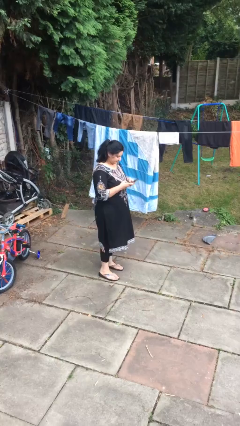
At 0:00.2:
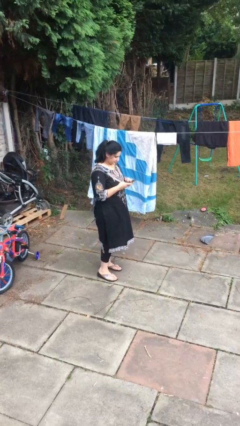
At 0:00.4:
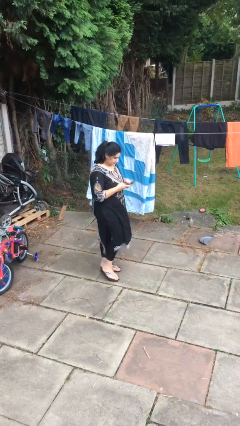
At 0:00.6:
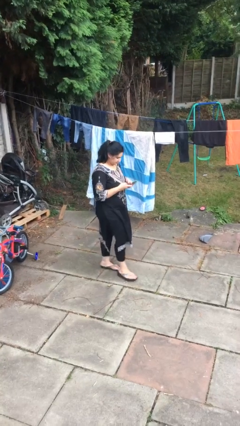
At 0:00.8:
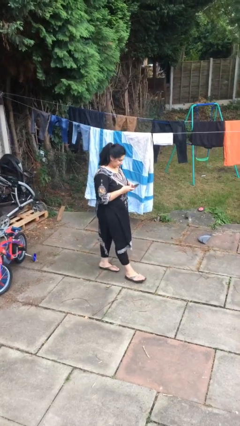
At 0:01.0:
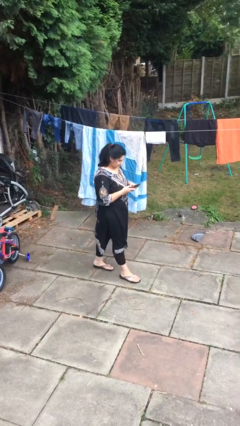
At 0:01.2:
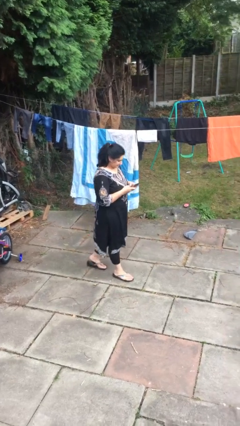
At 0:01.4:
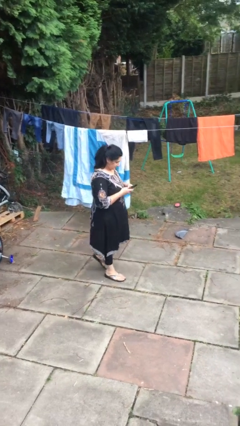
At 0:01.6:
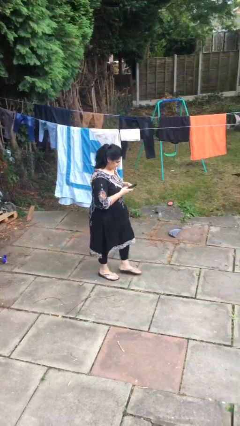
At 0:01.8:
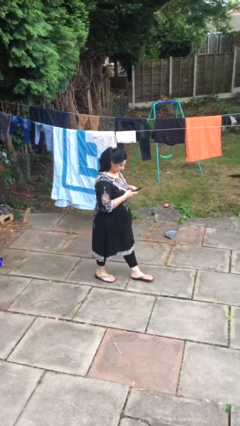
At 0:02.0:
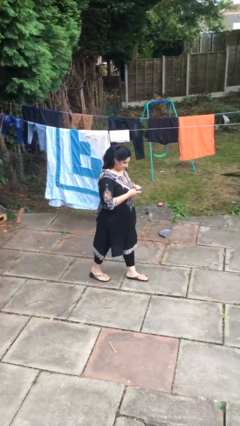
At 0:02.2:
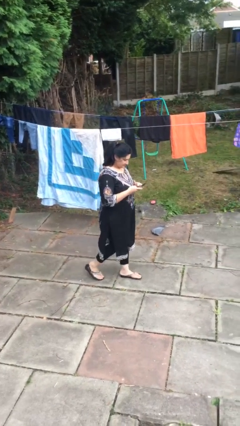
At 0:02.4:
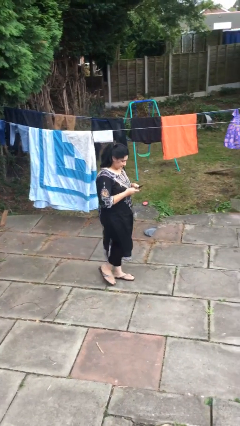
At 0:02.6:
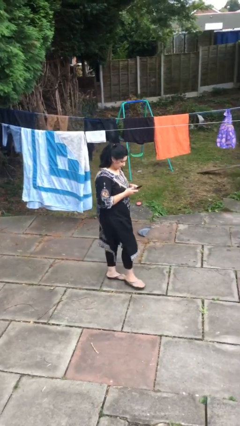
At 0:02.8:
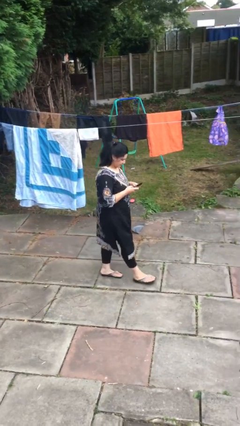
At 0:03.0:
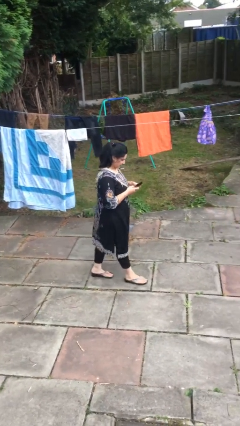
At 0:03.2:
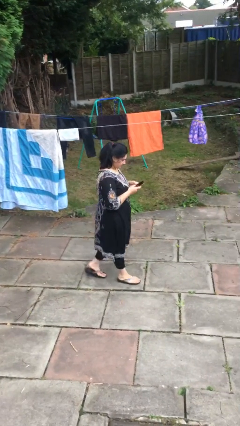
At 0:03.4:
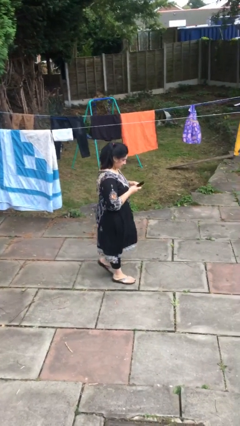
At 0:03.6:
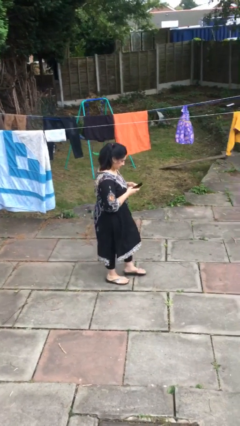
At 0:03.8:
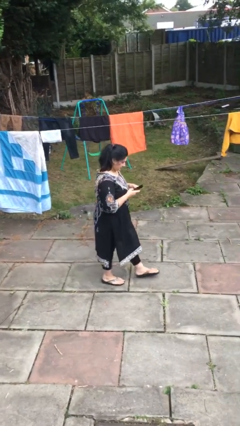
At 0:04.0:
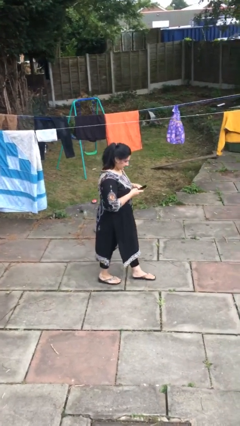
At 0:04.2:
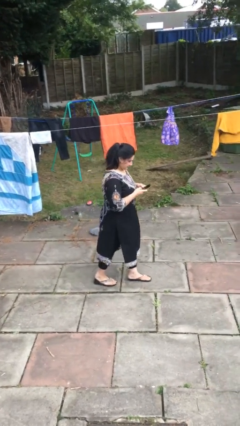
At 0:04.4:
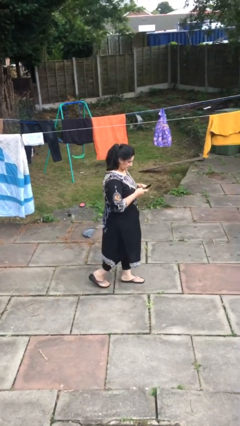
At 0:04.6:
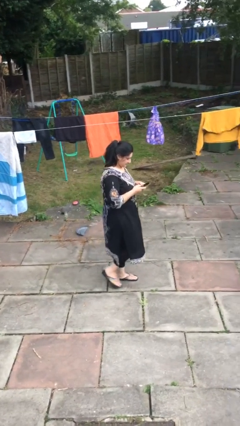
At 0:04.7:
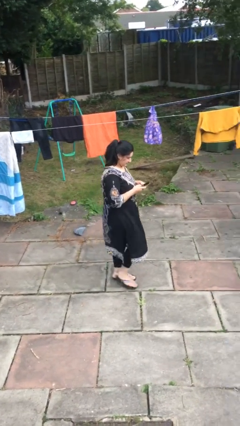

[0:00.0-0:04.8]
person texts on phone

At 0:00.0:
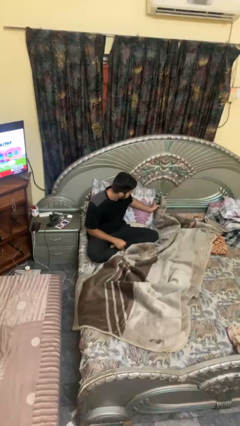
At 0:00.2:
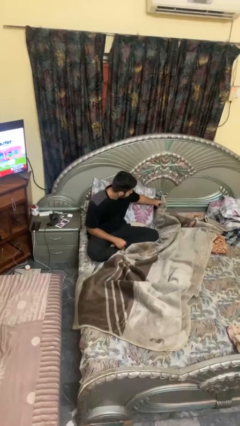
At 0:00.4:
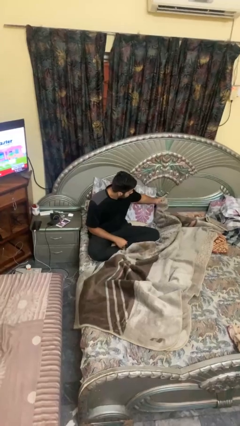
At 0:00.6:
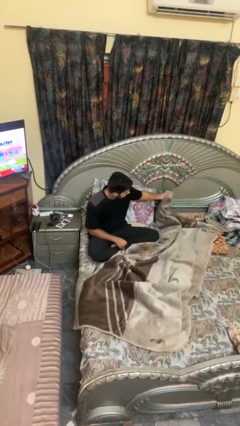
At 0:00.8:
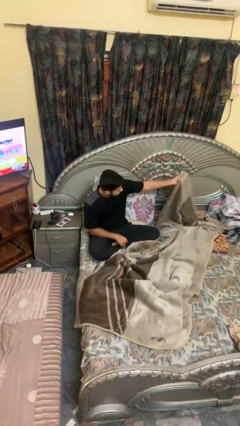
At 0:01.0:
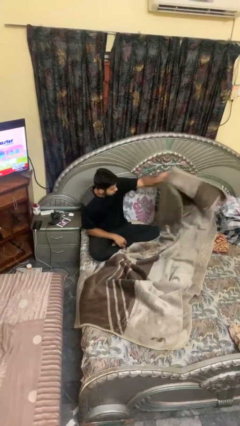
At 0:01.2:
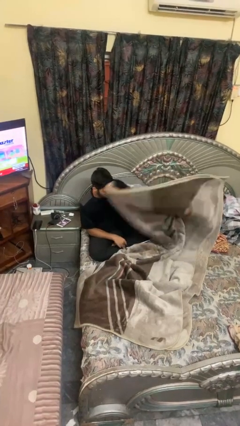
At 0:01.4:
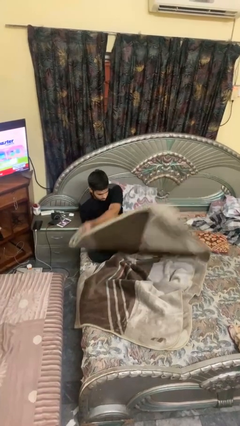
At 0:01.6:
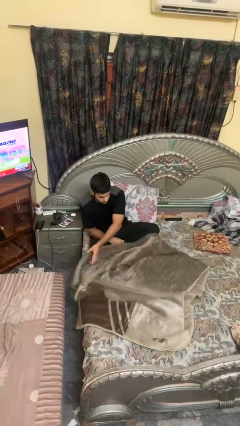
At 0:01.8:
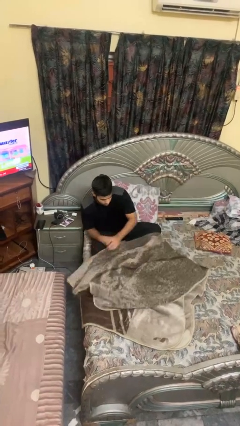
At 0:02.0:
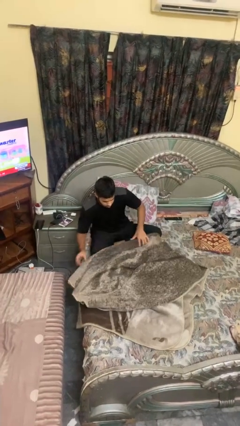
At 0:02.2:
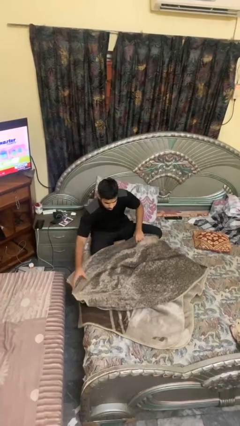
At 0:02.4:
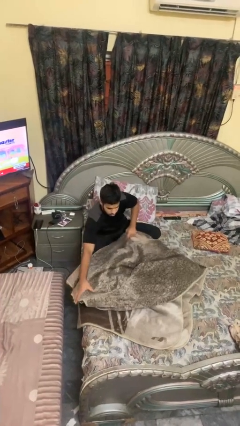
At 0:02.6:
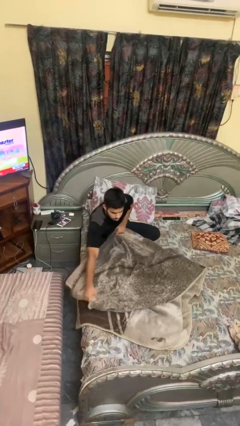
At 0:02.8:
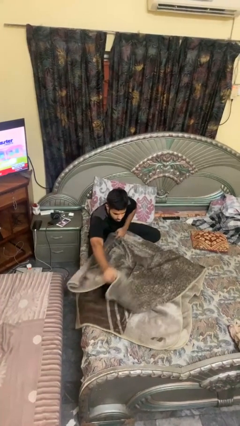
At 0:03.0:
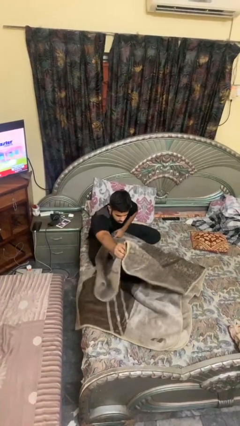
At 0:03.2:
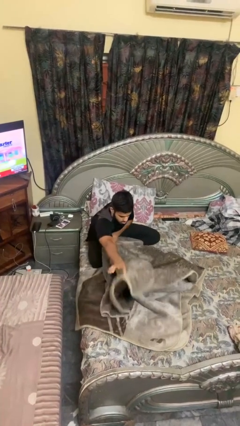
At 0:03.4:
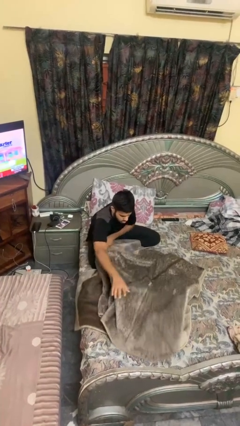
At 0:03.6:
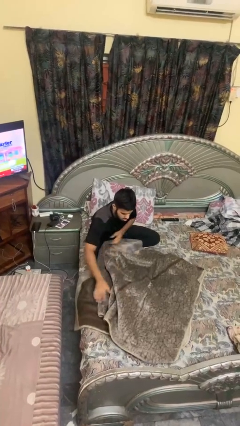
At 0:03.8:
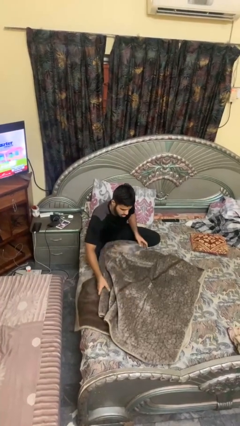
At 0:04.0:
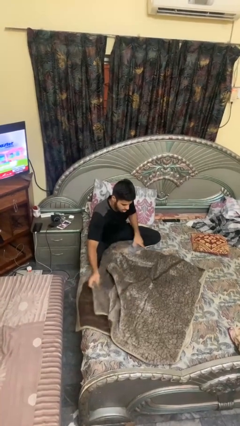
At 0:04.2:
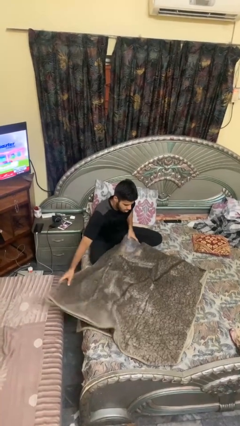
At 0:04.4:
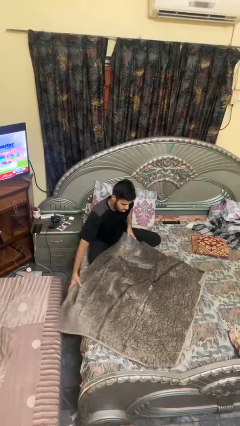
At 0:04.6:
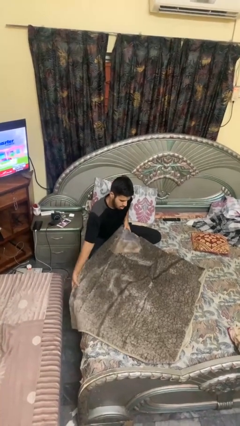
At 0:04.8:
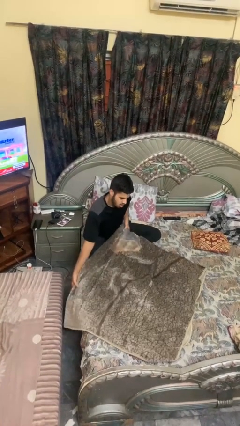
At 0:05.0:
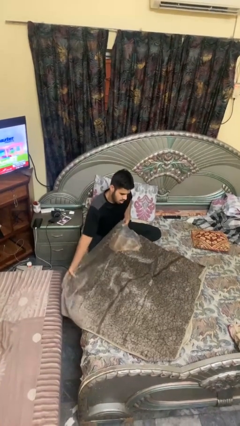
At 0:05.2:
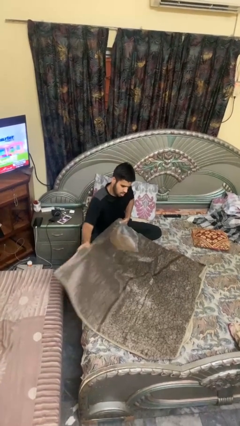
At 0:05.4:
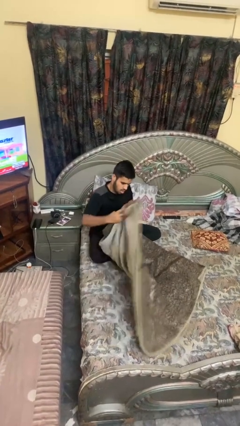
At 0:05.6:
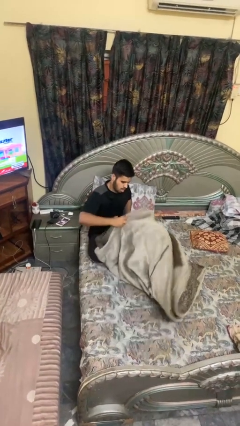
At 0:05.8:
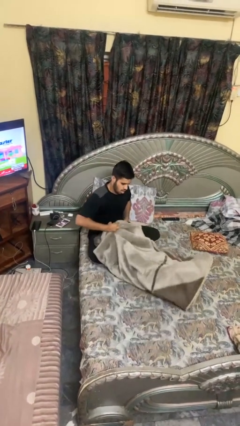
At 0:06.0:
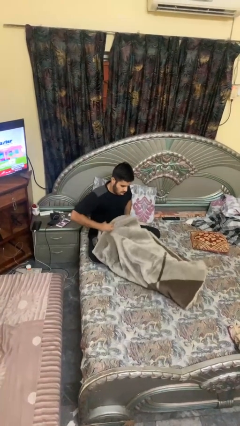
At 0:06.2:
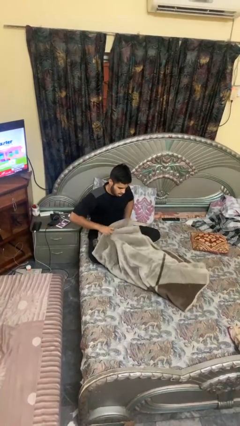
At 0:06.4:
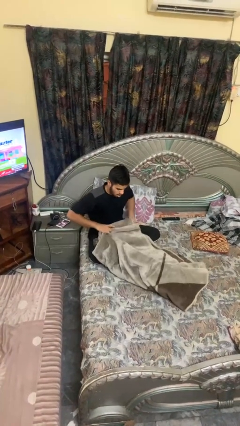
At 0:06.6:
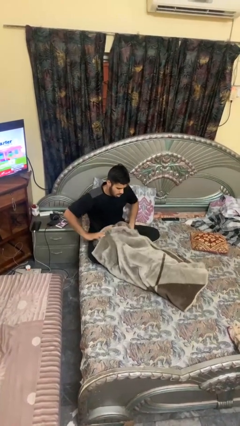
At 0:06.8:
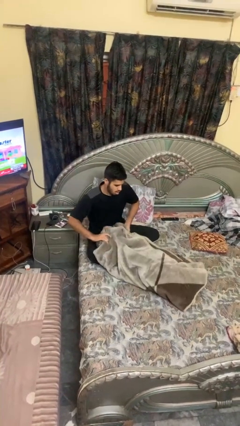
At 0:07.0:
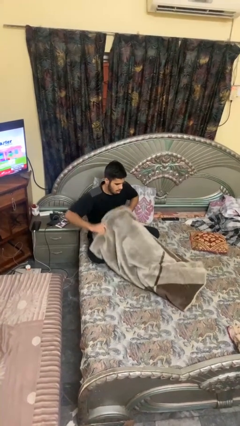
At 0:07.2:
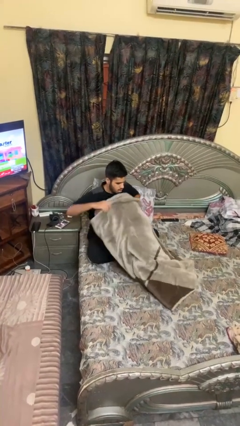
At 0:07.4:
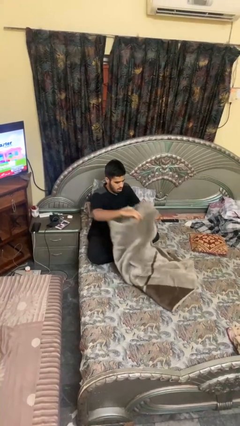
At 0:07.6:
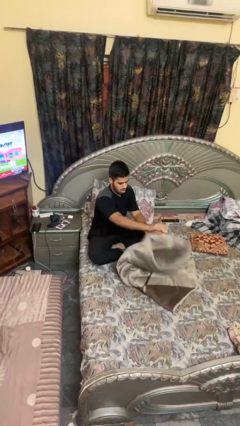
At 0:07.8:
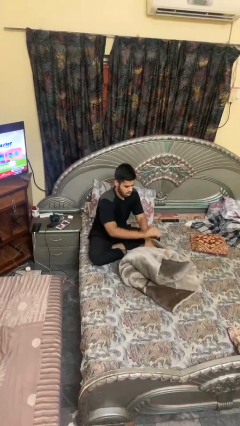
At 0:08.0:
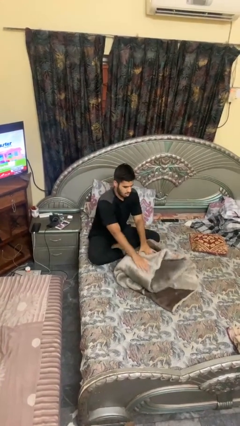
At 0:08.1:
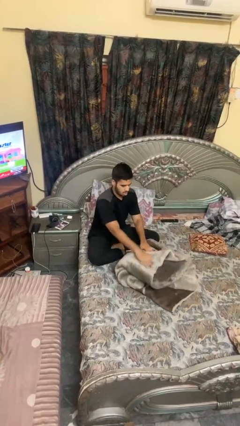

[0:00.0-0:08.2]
person folds blanket

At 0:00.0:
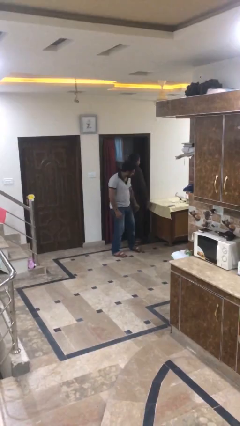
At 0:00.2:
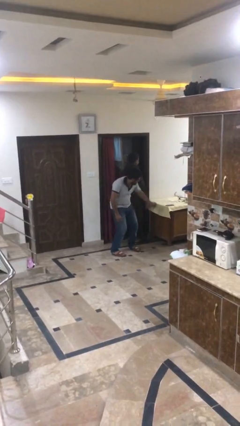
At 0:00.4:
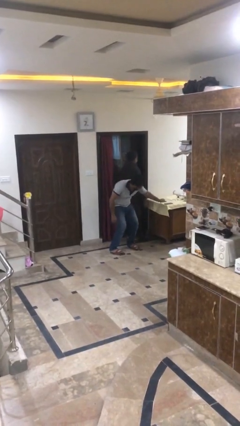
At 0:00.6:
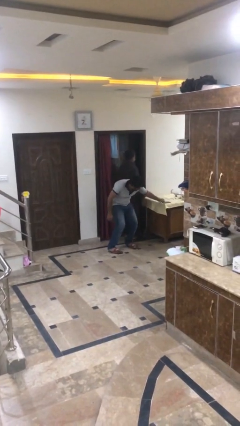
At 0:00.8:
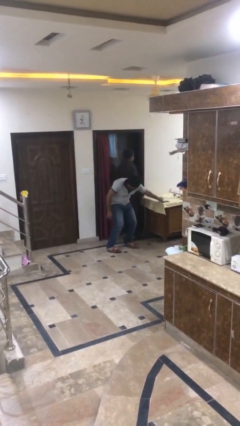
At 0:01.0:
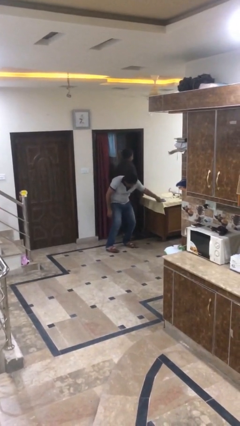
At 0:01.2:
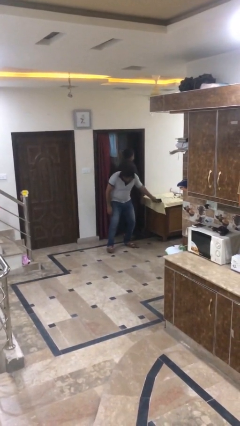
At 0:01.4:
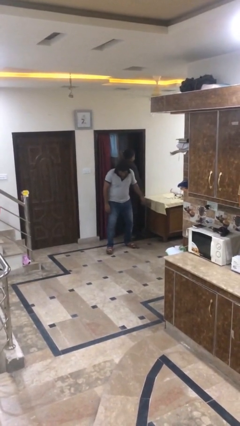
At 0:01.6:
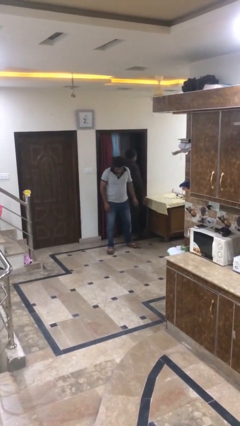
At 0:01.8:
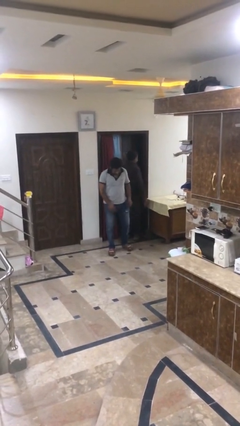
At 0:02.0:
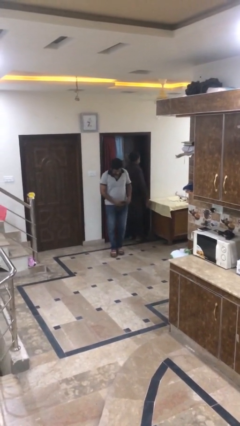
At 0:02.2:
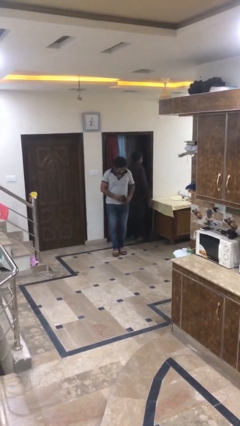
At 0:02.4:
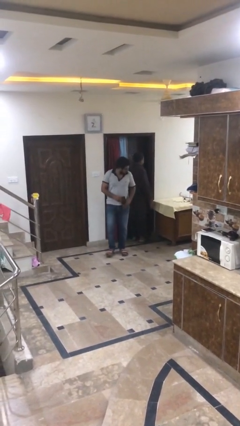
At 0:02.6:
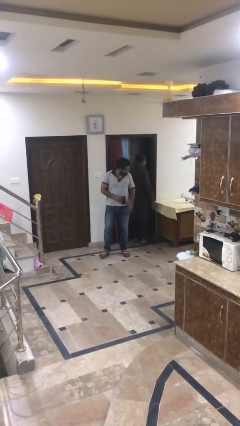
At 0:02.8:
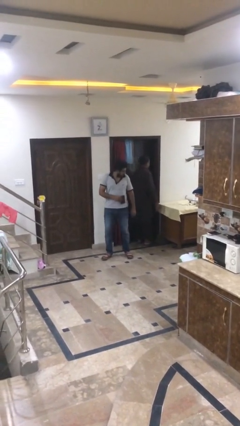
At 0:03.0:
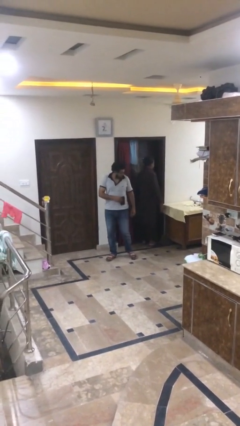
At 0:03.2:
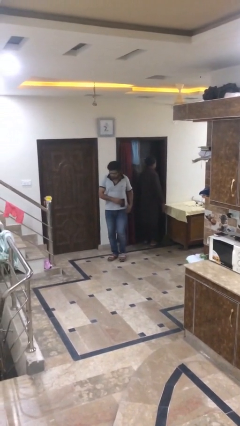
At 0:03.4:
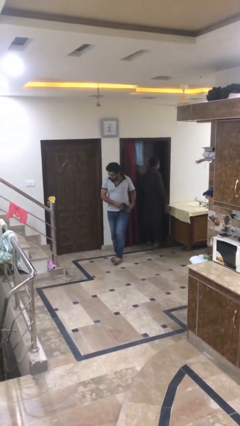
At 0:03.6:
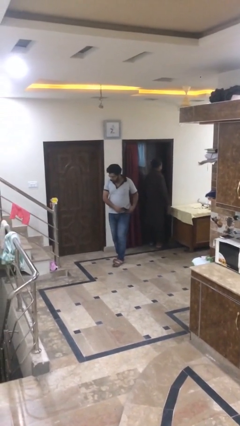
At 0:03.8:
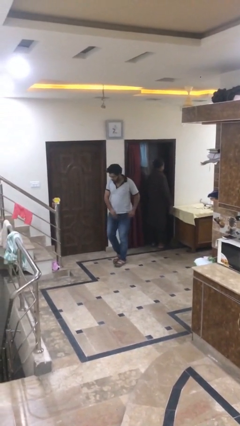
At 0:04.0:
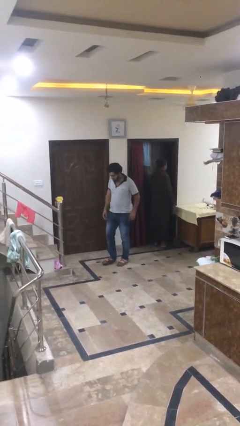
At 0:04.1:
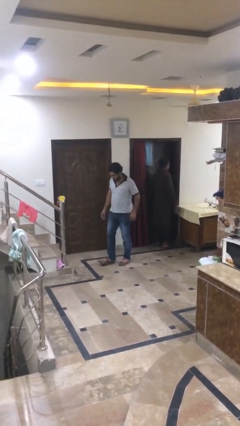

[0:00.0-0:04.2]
person steals object from person

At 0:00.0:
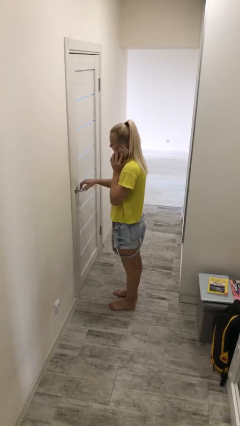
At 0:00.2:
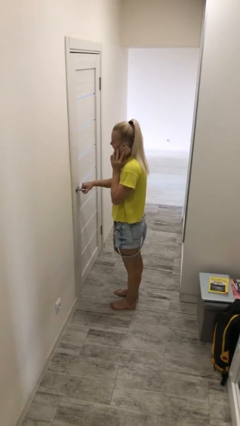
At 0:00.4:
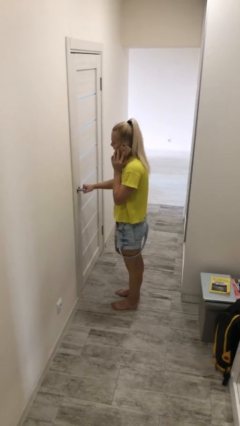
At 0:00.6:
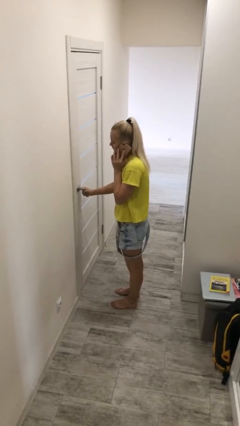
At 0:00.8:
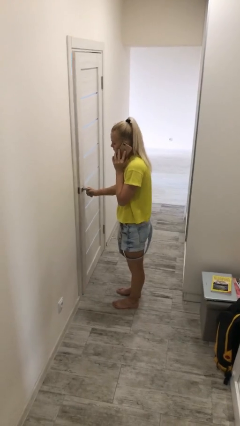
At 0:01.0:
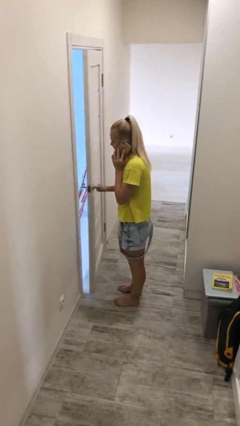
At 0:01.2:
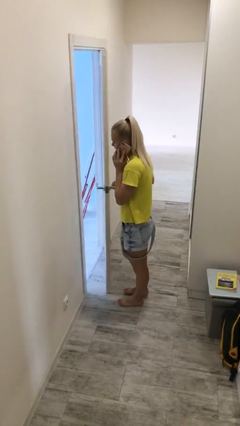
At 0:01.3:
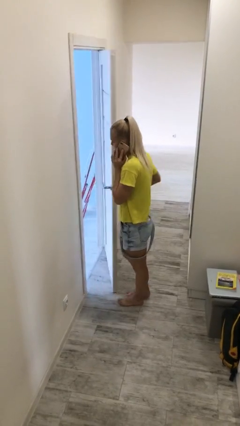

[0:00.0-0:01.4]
person opens facility door
